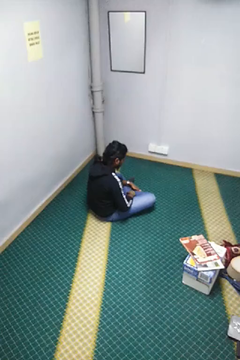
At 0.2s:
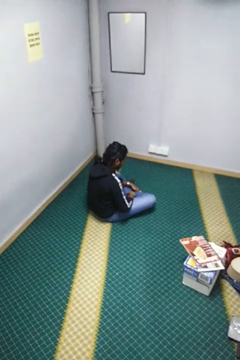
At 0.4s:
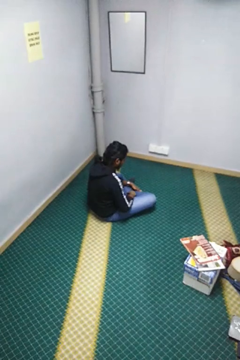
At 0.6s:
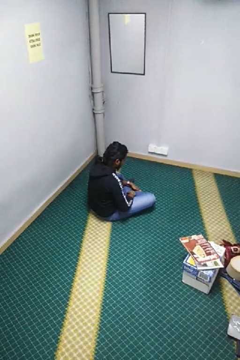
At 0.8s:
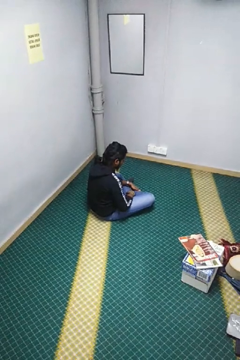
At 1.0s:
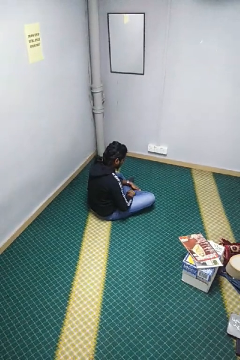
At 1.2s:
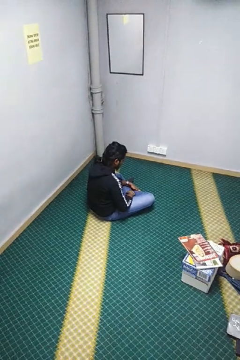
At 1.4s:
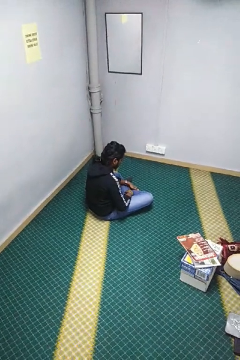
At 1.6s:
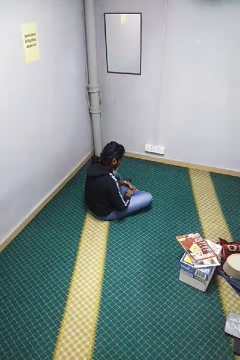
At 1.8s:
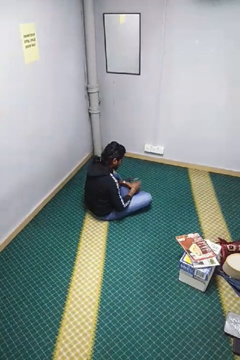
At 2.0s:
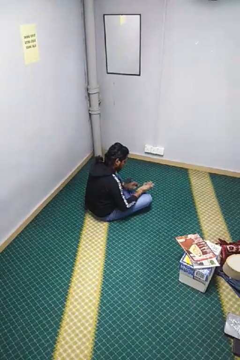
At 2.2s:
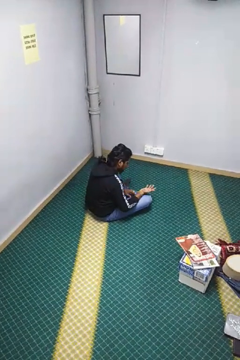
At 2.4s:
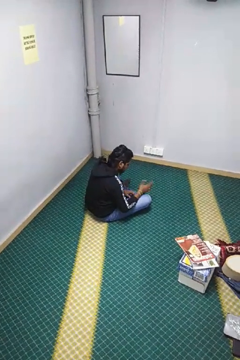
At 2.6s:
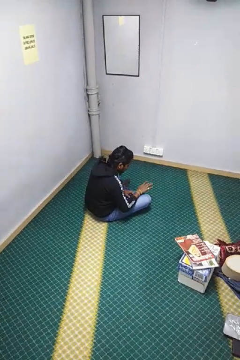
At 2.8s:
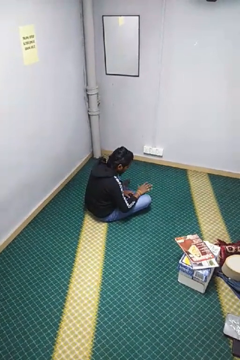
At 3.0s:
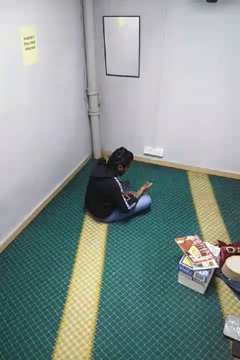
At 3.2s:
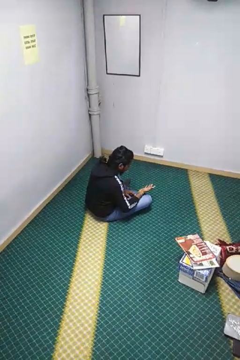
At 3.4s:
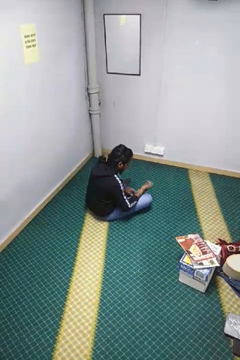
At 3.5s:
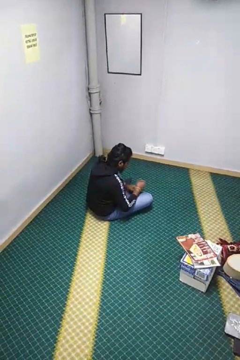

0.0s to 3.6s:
person looks at hands in lap

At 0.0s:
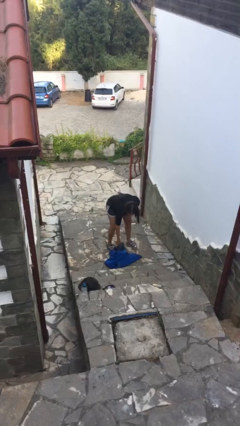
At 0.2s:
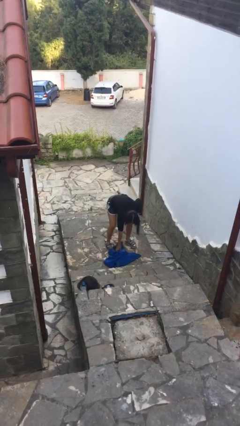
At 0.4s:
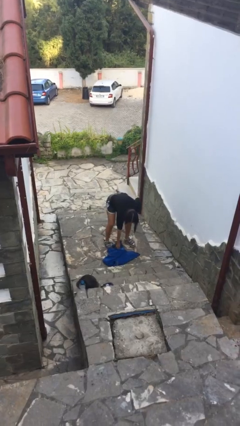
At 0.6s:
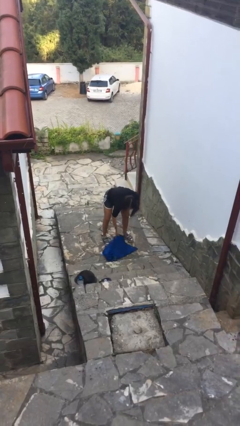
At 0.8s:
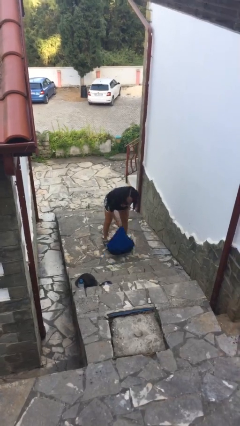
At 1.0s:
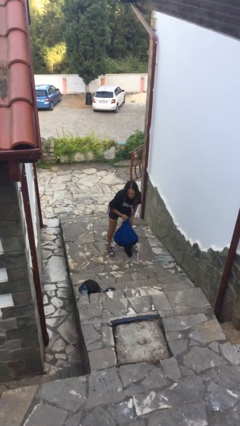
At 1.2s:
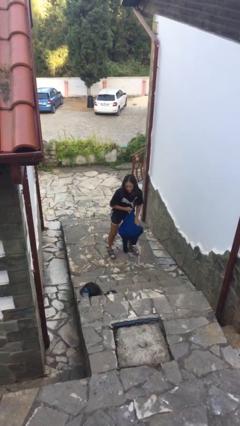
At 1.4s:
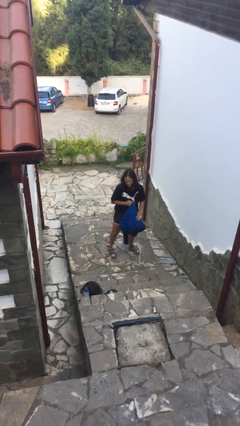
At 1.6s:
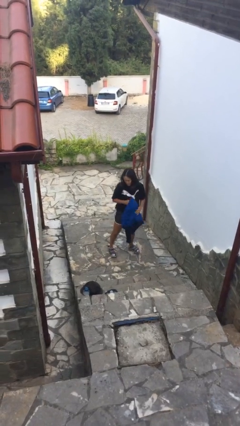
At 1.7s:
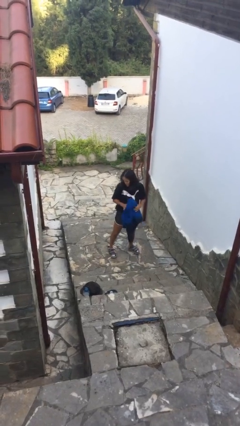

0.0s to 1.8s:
person picks up object from floor

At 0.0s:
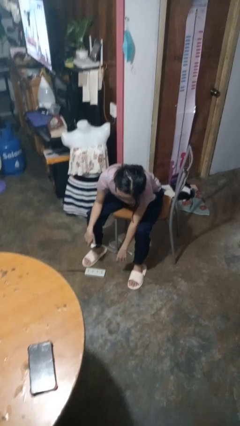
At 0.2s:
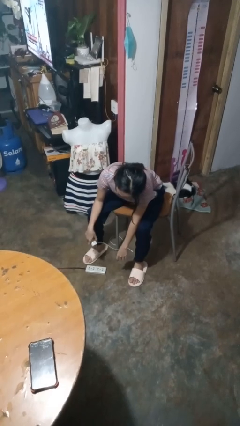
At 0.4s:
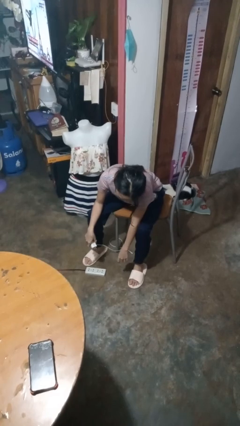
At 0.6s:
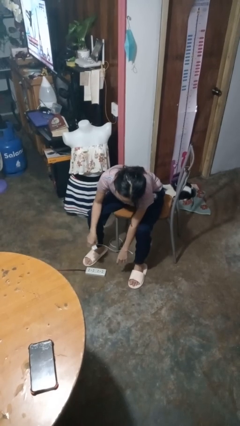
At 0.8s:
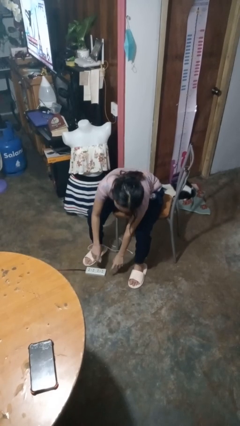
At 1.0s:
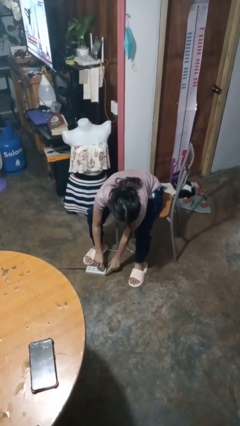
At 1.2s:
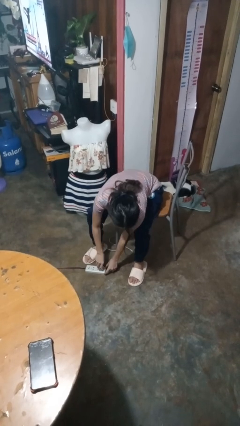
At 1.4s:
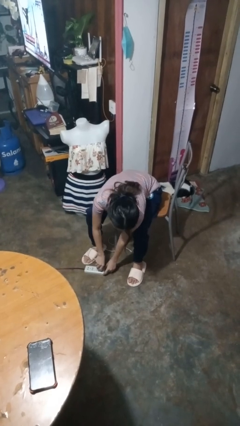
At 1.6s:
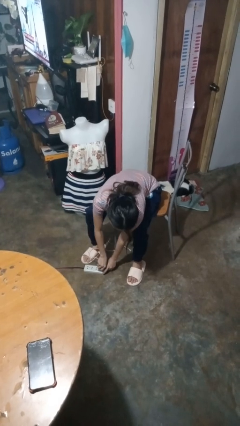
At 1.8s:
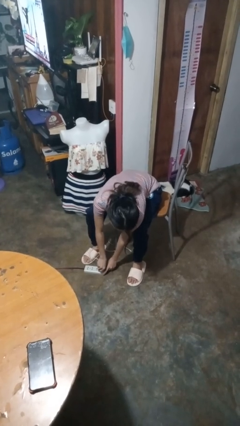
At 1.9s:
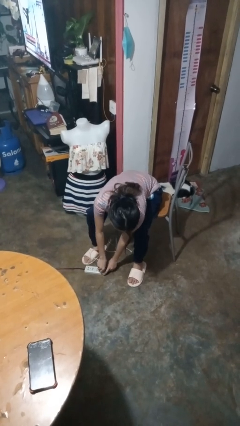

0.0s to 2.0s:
person plugs into electrical socket

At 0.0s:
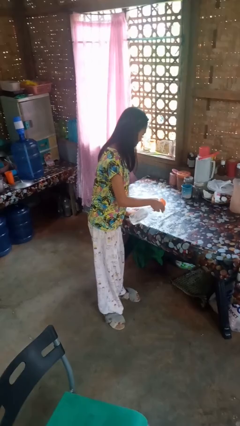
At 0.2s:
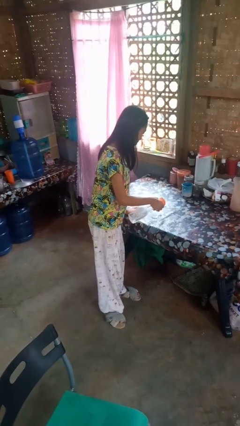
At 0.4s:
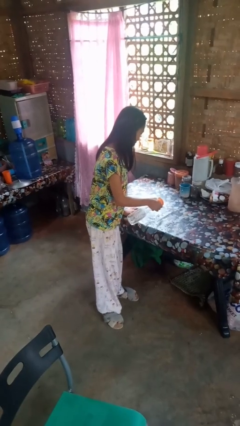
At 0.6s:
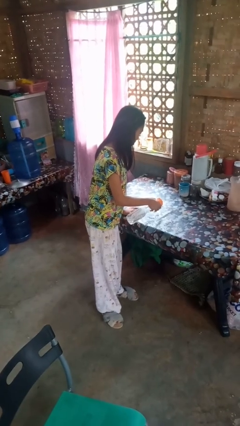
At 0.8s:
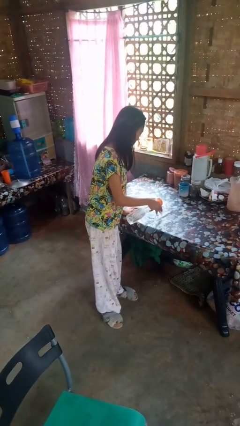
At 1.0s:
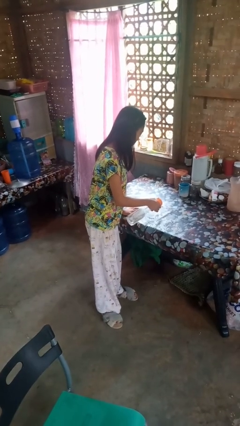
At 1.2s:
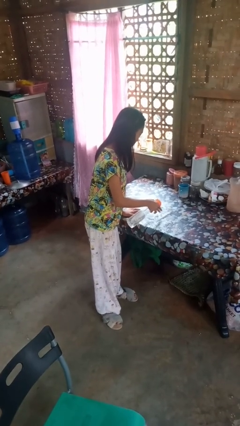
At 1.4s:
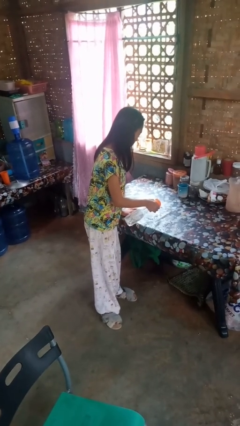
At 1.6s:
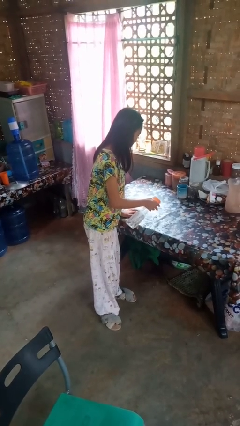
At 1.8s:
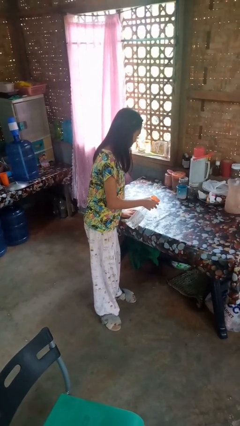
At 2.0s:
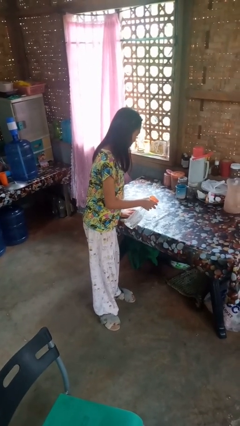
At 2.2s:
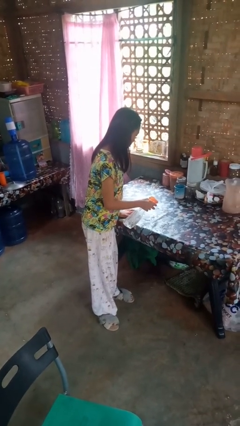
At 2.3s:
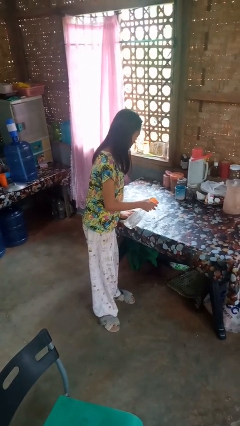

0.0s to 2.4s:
person sprays from bottle

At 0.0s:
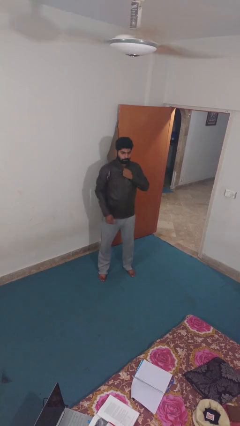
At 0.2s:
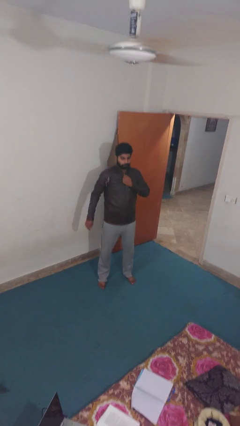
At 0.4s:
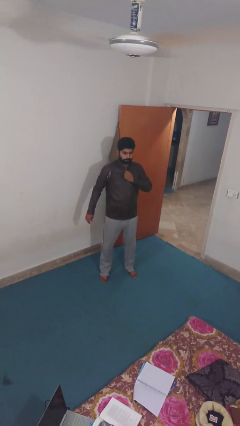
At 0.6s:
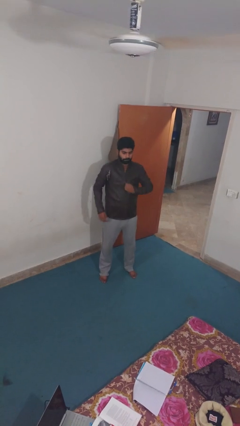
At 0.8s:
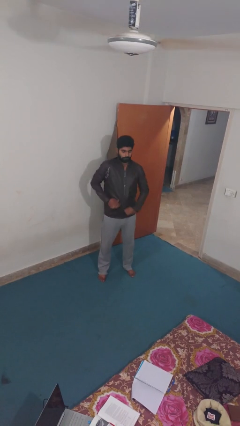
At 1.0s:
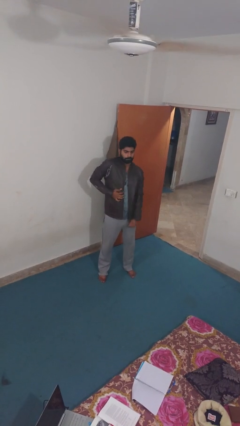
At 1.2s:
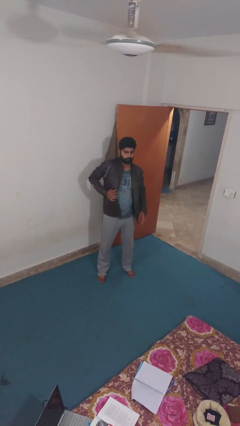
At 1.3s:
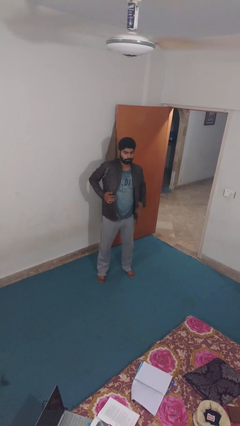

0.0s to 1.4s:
person unzips jacket

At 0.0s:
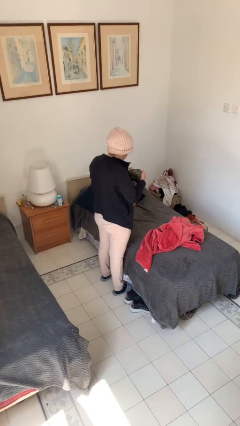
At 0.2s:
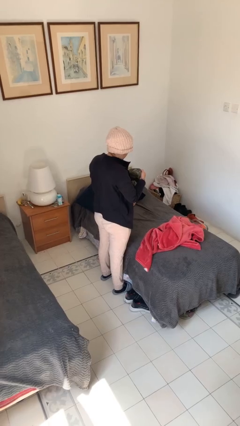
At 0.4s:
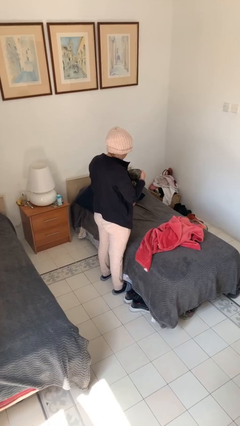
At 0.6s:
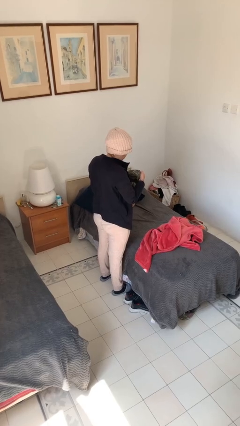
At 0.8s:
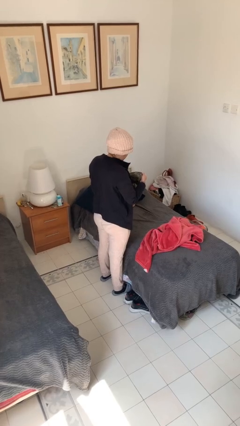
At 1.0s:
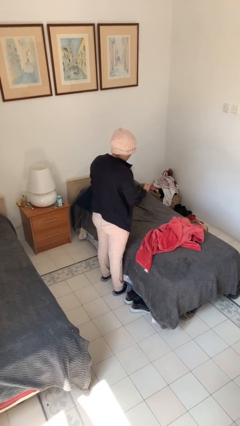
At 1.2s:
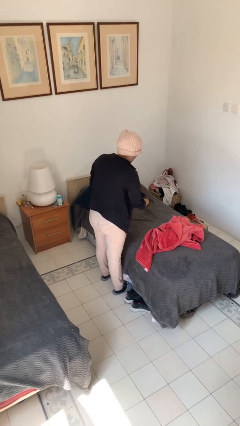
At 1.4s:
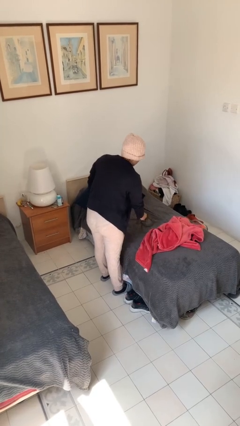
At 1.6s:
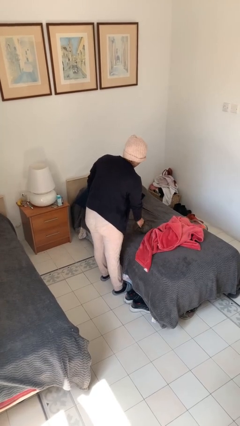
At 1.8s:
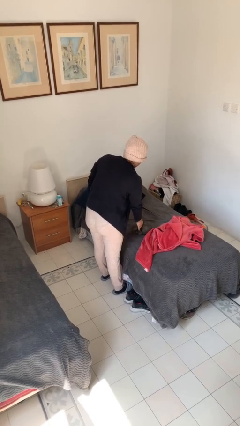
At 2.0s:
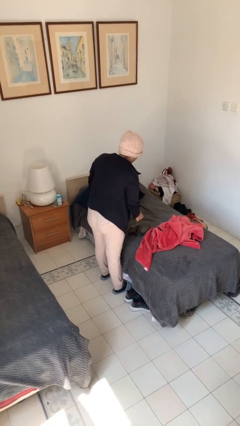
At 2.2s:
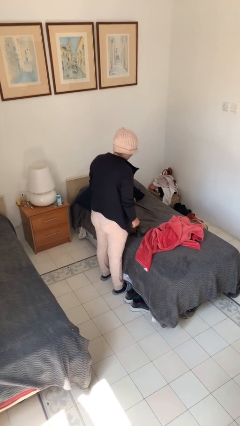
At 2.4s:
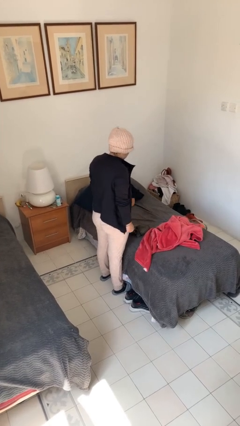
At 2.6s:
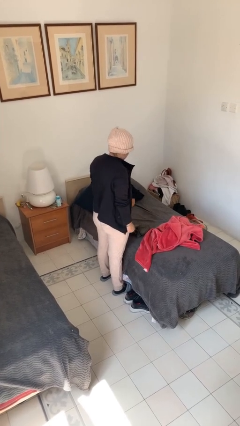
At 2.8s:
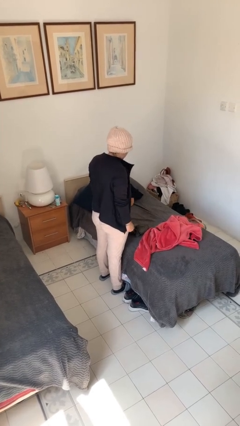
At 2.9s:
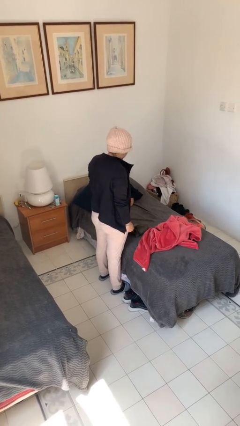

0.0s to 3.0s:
person puts down object on couch

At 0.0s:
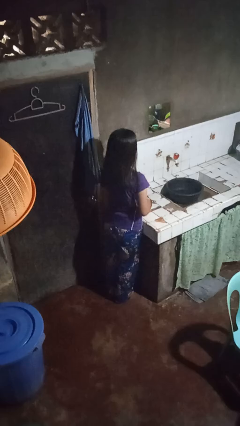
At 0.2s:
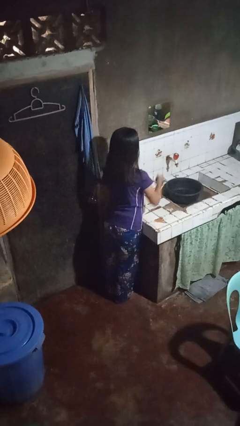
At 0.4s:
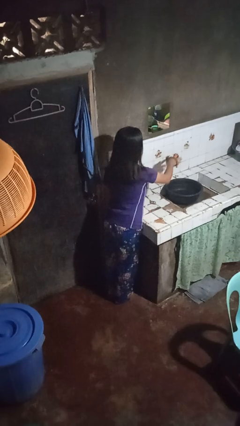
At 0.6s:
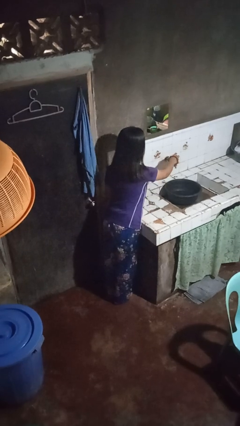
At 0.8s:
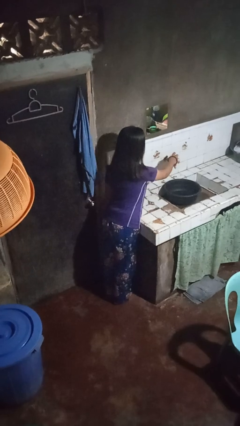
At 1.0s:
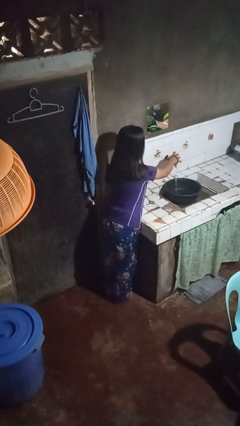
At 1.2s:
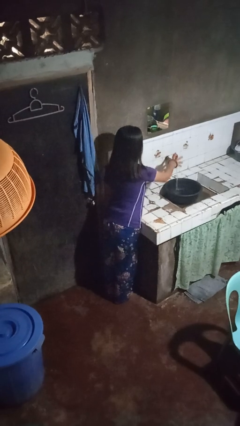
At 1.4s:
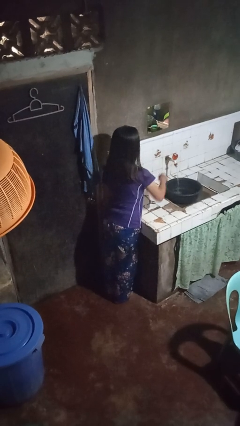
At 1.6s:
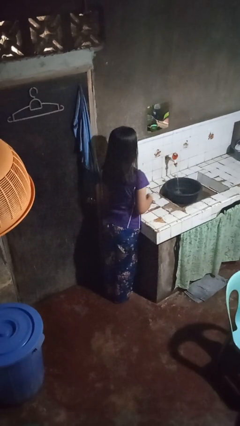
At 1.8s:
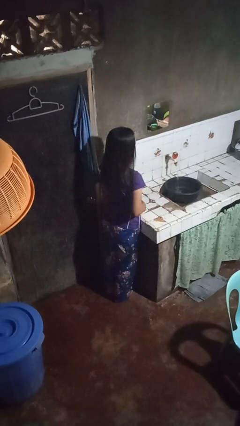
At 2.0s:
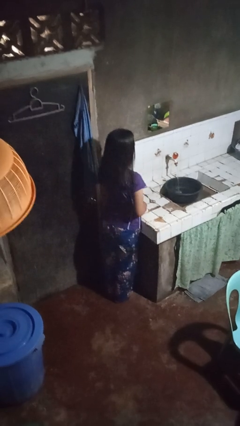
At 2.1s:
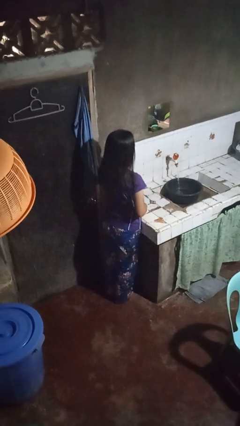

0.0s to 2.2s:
person turns on faucet

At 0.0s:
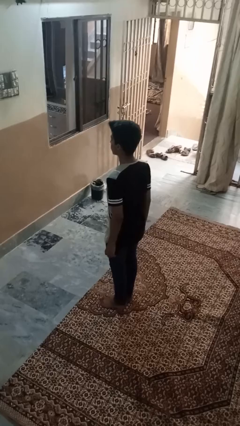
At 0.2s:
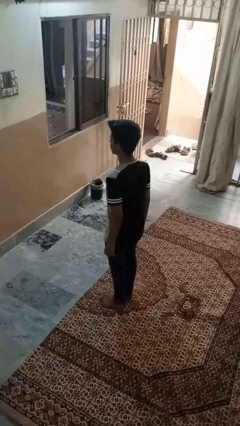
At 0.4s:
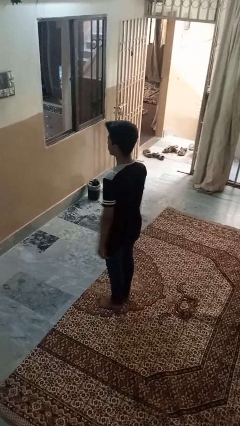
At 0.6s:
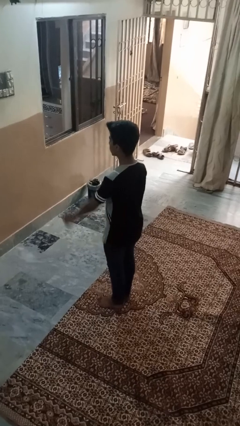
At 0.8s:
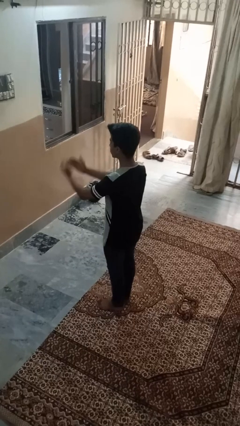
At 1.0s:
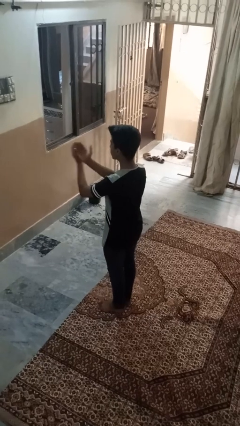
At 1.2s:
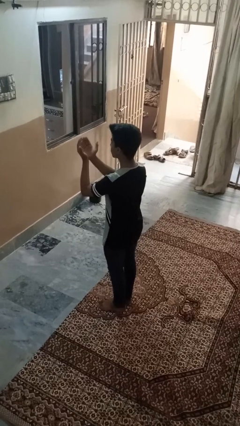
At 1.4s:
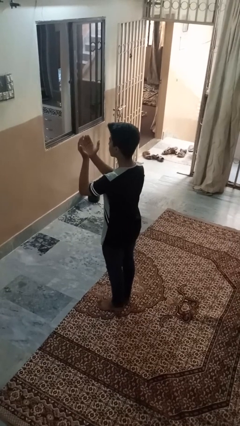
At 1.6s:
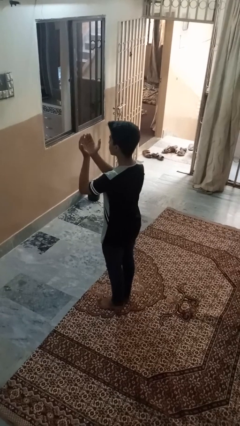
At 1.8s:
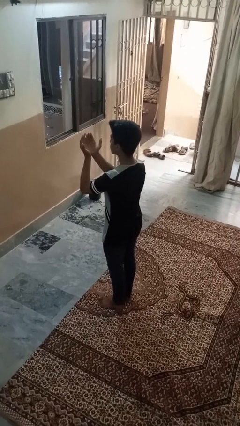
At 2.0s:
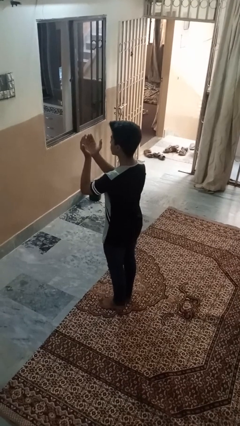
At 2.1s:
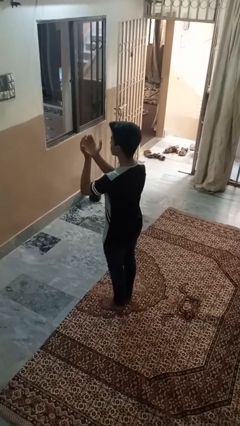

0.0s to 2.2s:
person prays
